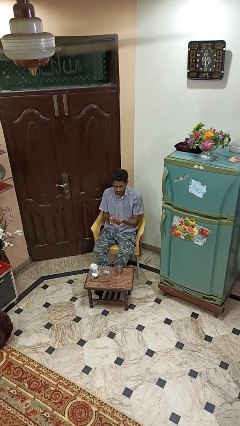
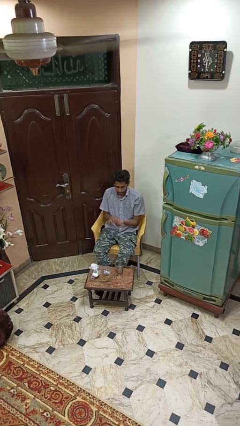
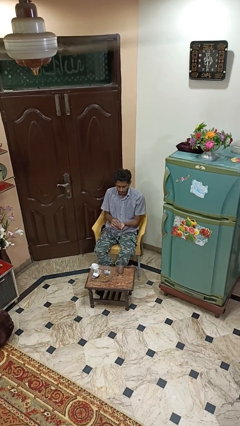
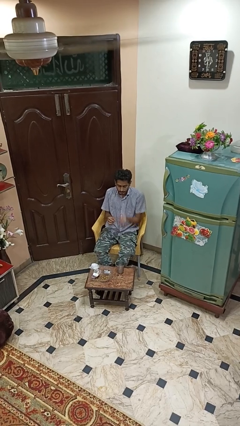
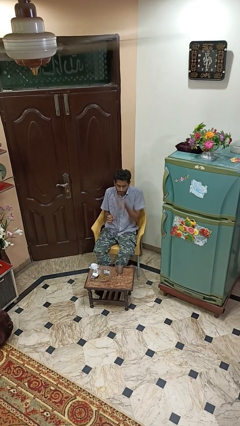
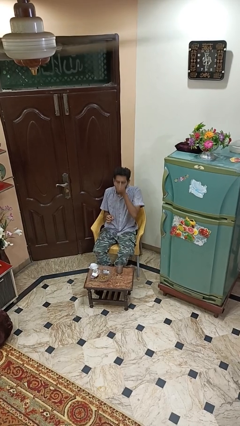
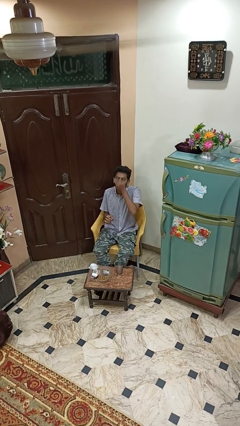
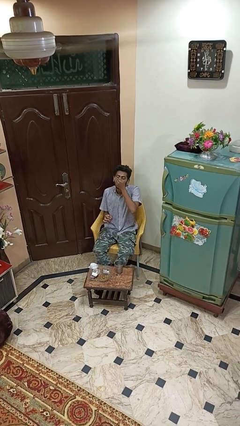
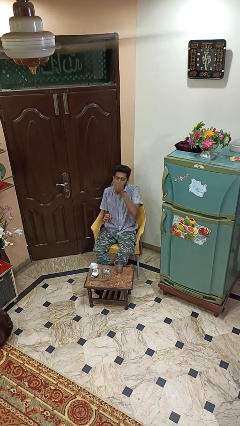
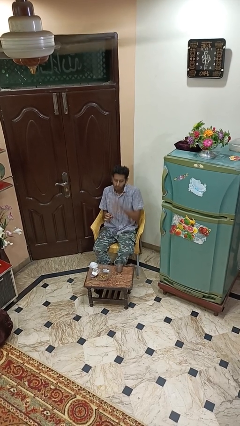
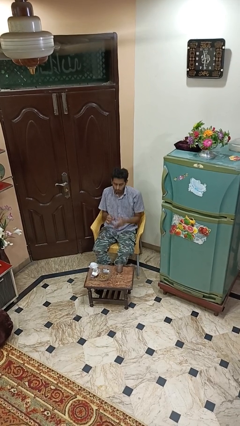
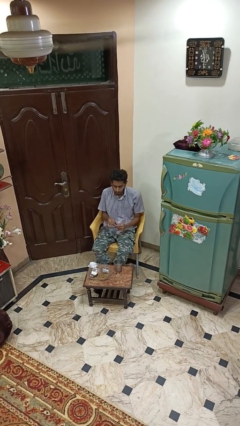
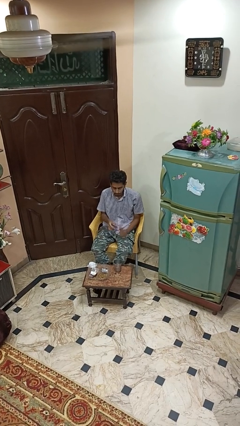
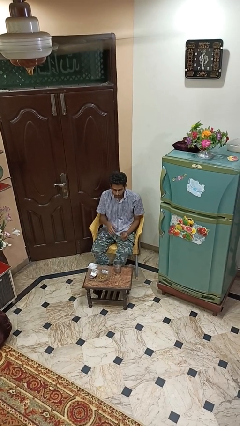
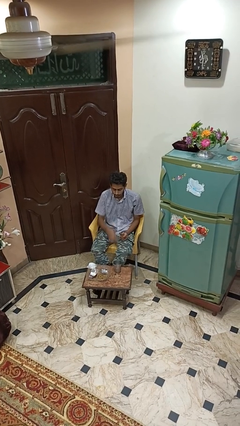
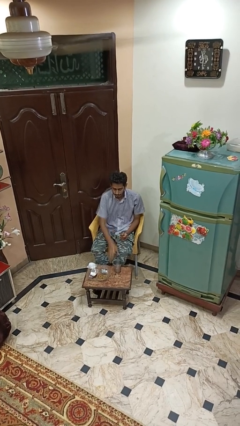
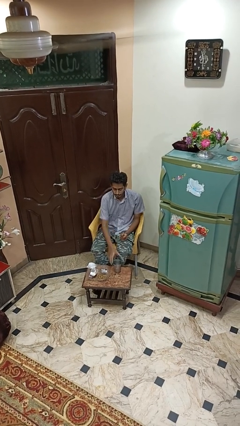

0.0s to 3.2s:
person takes medicine pills

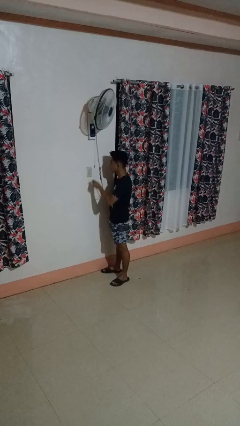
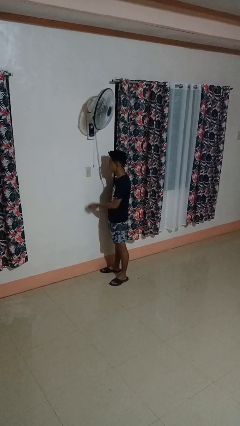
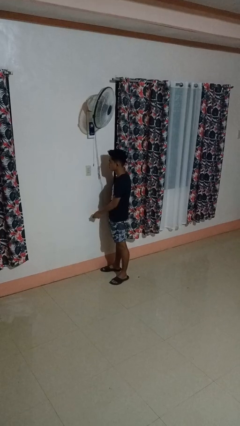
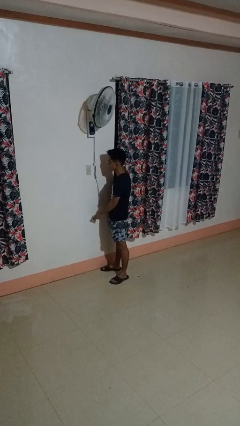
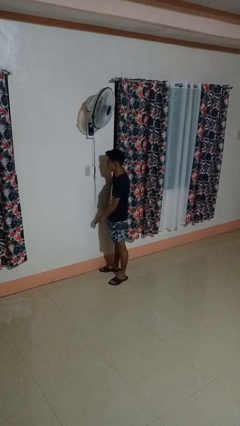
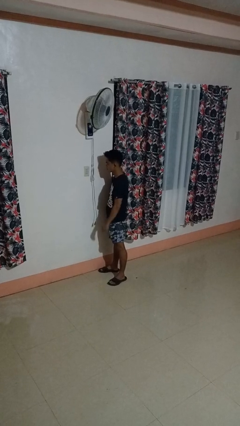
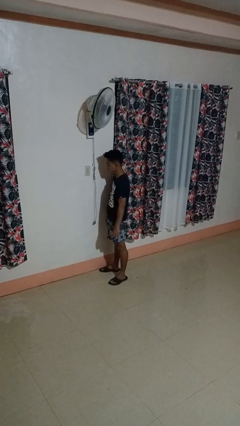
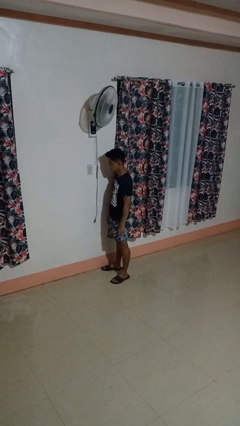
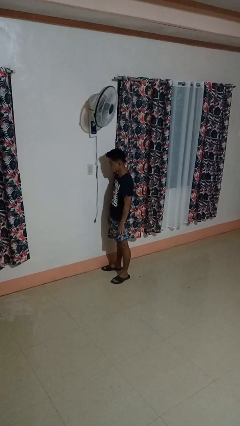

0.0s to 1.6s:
person unplugs from electrical socket

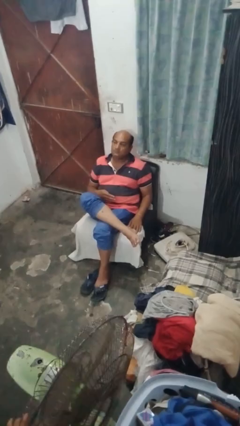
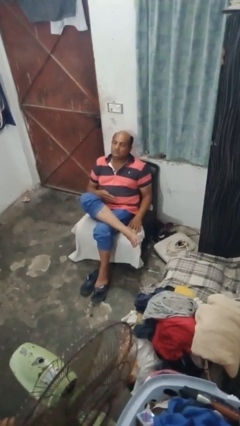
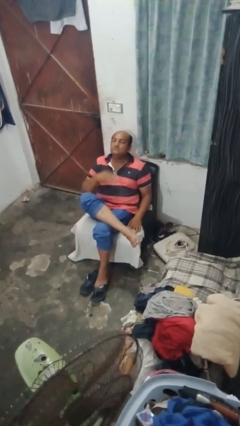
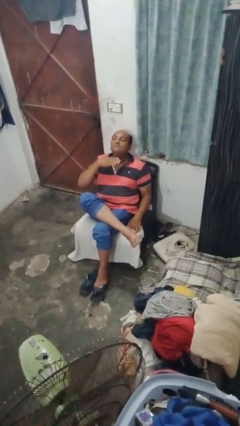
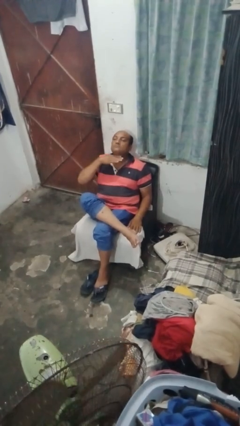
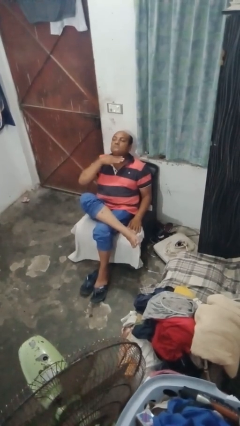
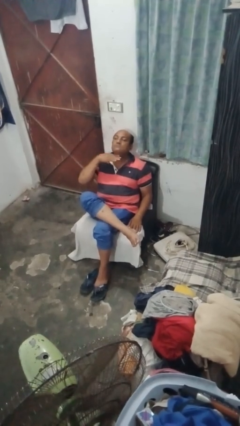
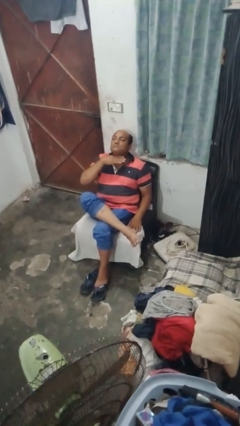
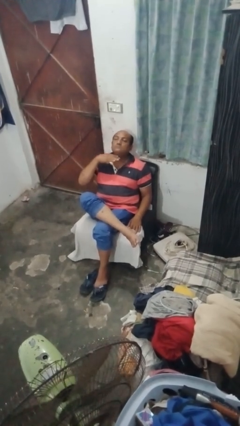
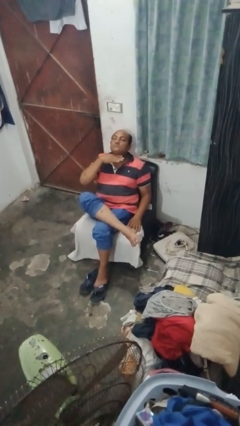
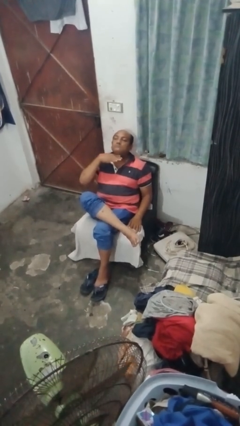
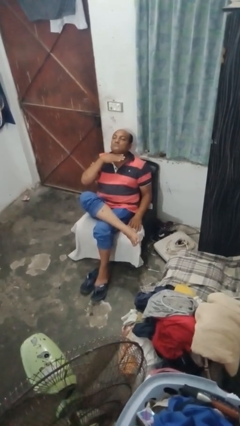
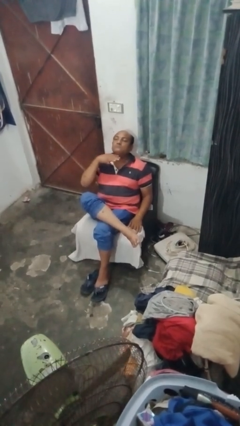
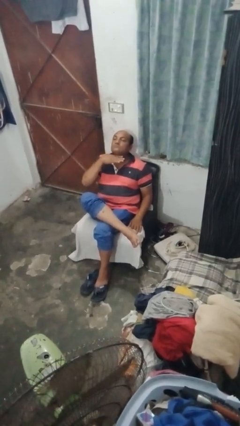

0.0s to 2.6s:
person gestures cut

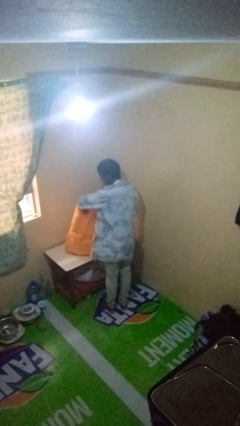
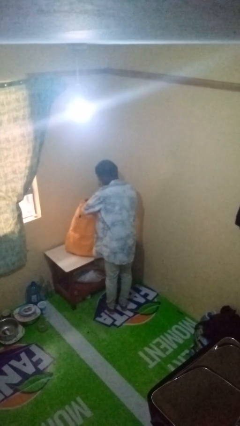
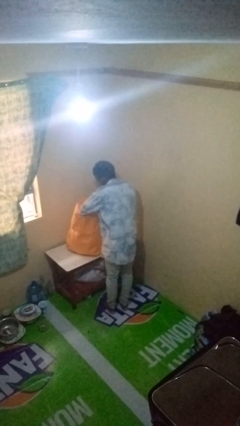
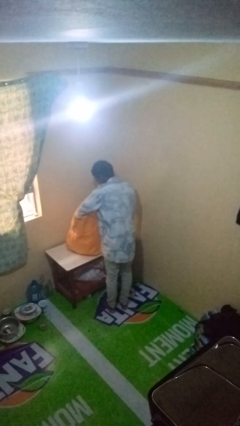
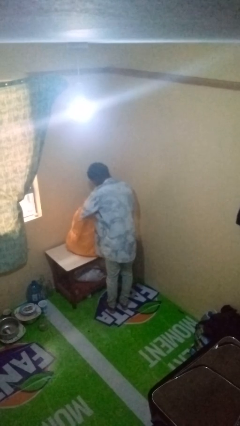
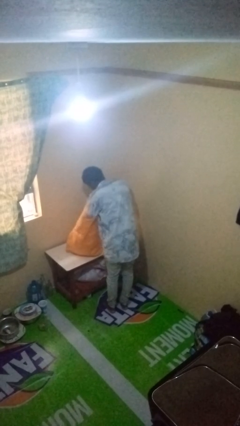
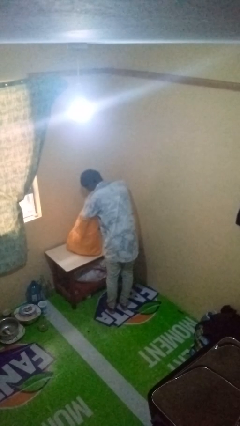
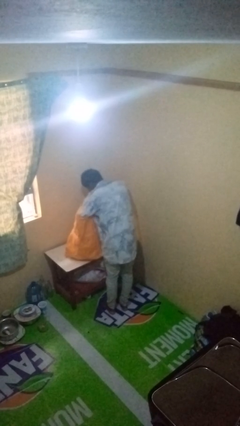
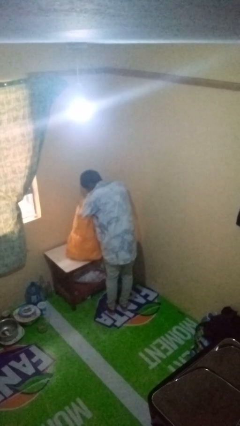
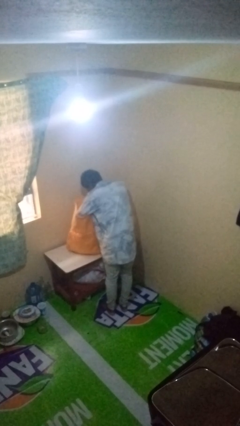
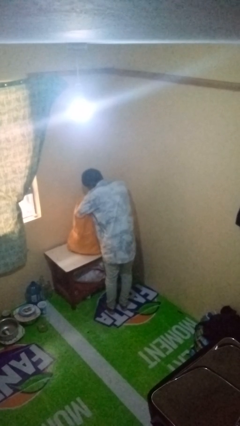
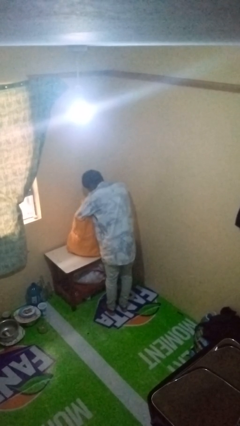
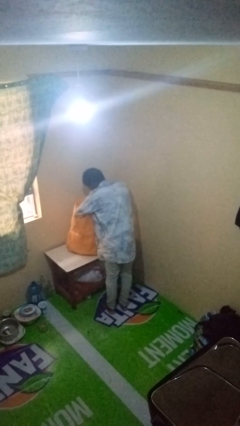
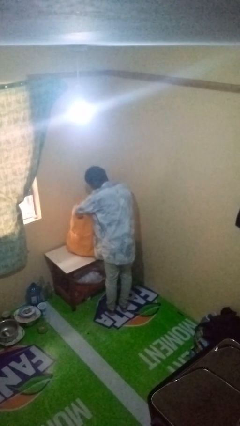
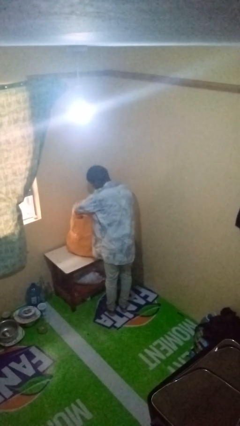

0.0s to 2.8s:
person searches in bag

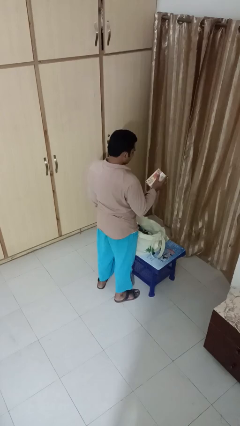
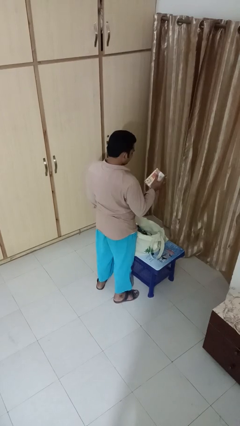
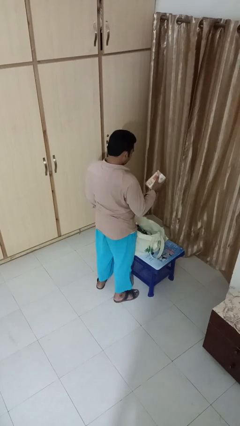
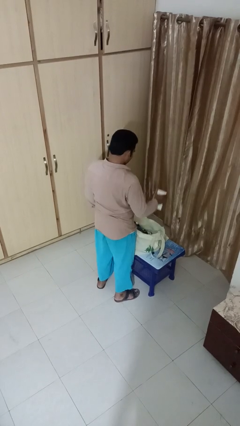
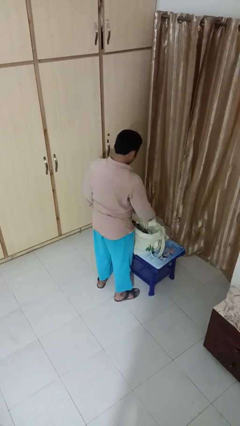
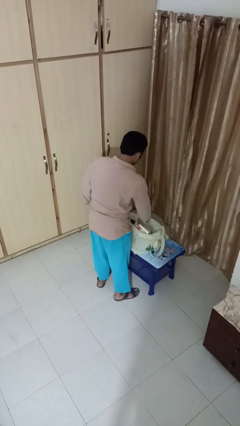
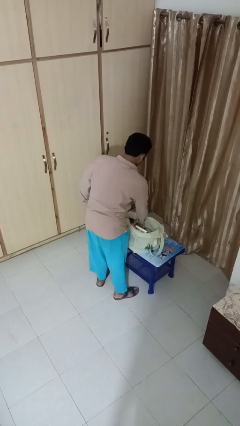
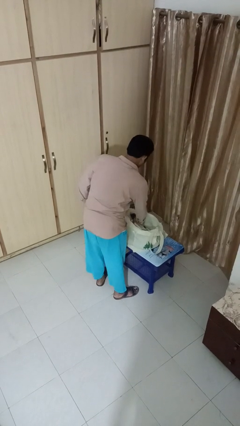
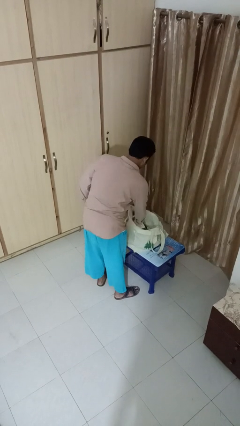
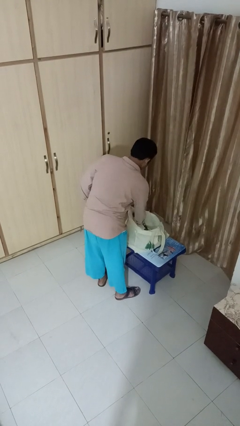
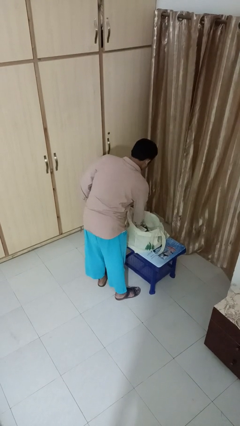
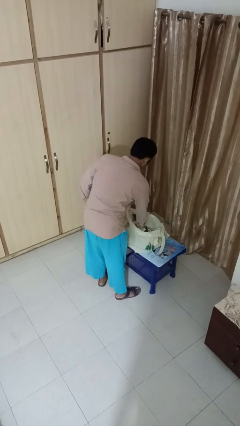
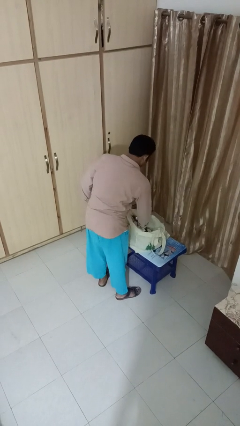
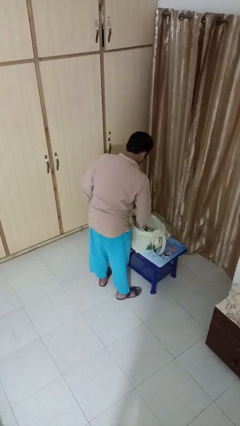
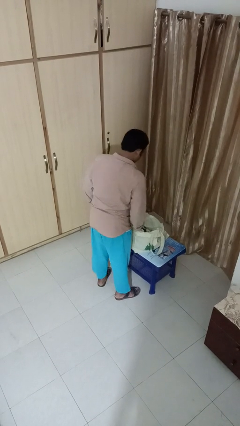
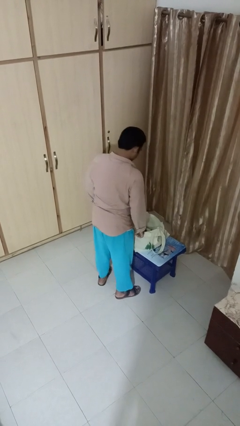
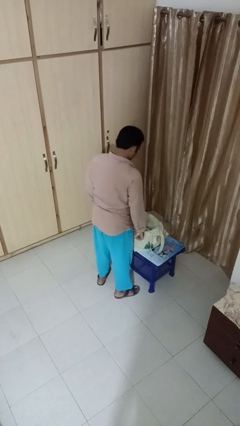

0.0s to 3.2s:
person puts object into bag

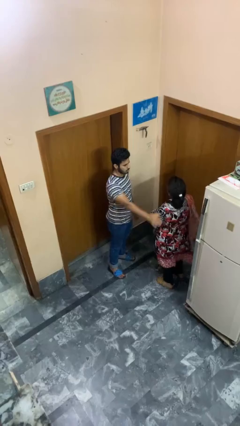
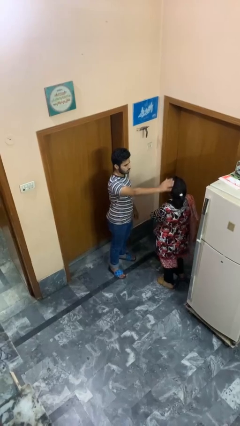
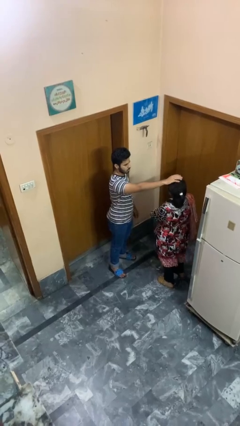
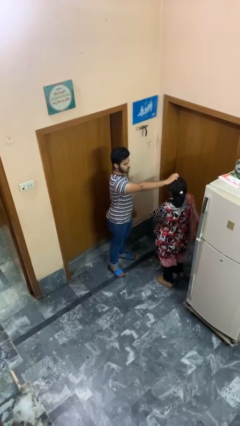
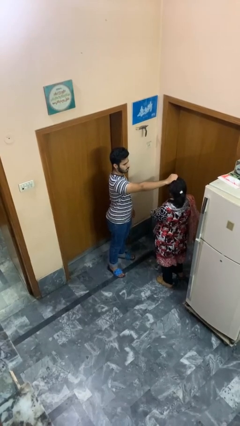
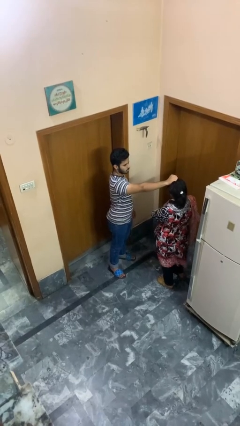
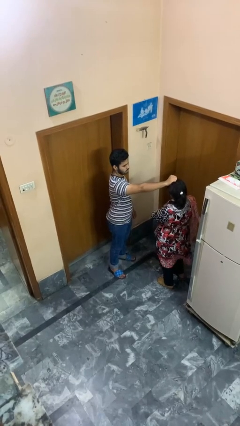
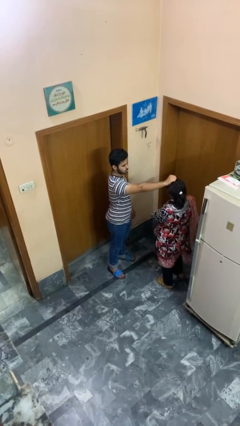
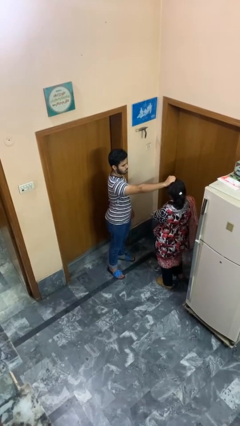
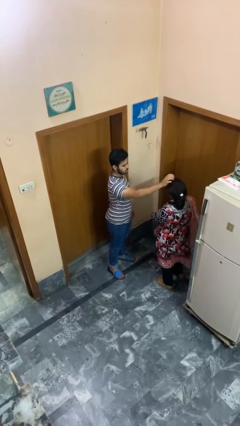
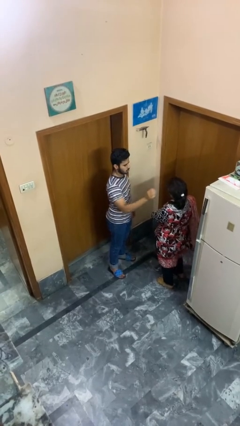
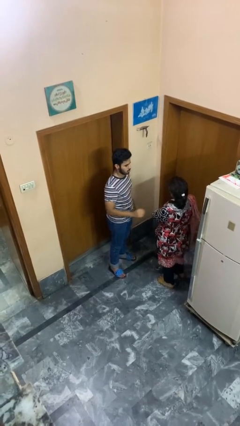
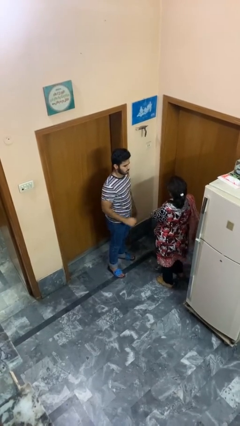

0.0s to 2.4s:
person grabs person by hair

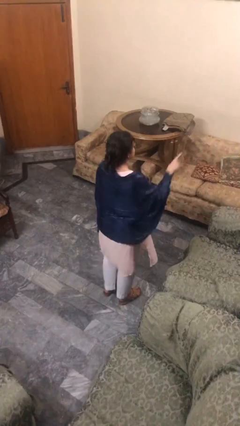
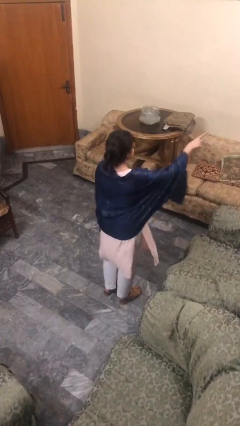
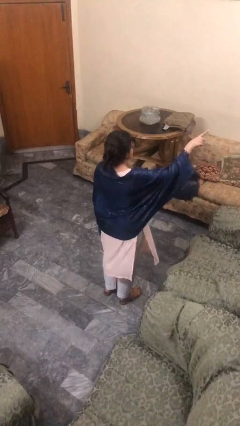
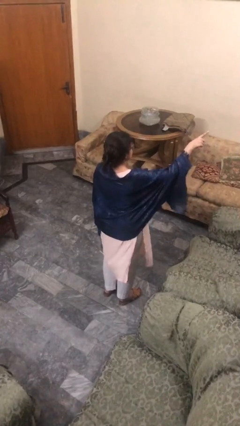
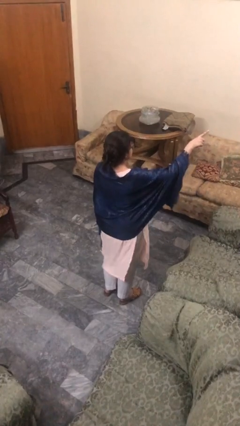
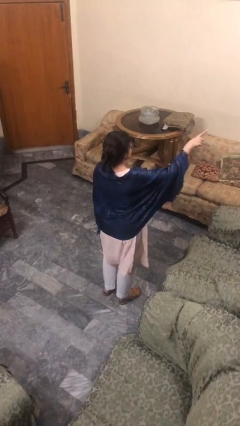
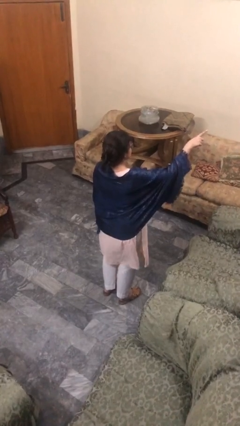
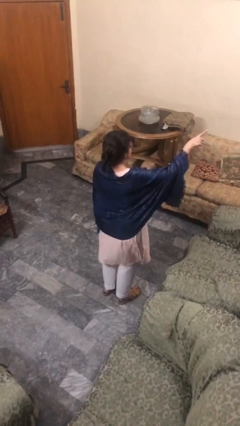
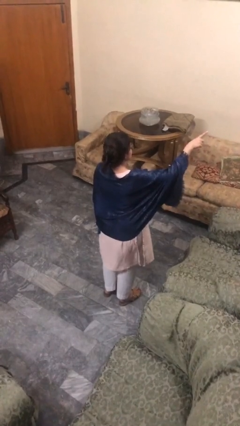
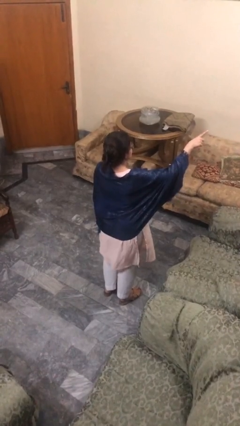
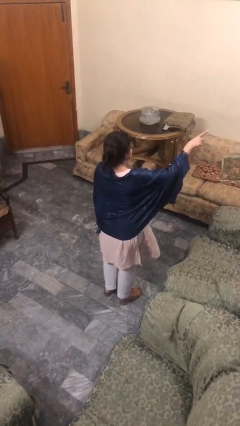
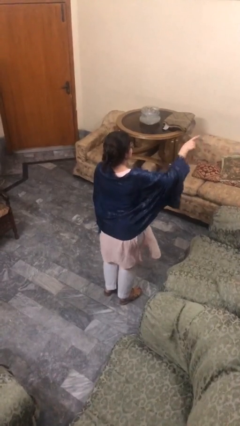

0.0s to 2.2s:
person points at person
